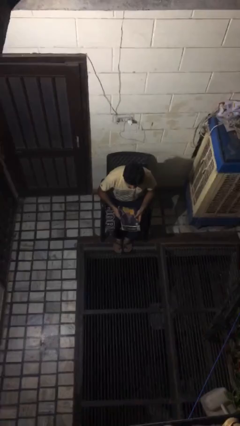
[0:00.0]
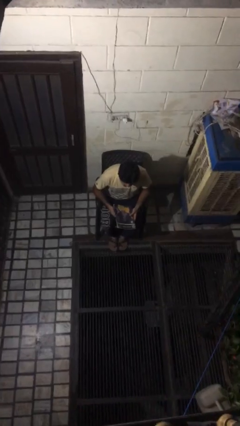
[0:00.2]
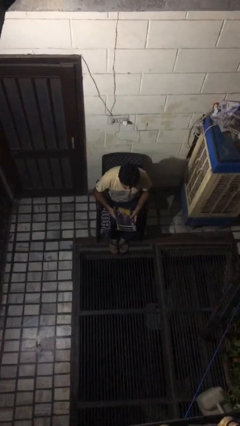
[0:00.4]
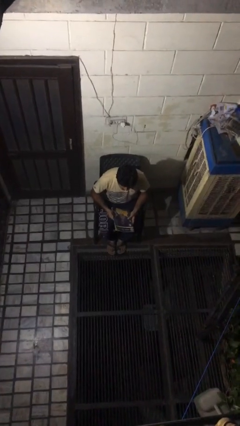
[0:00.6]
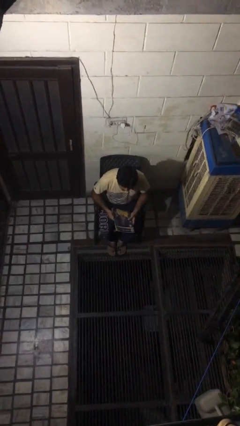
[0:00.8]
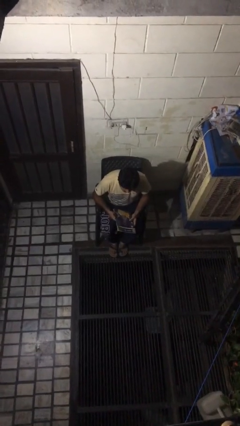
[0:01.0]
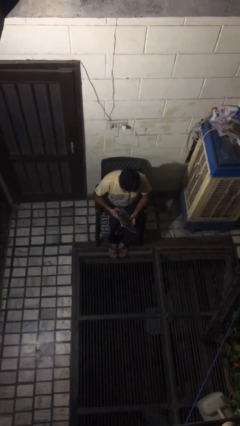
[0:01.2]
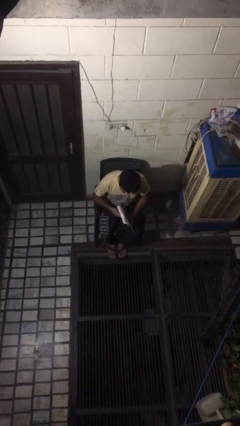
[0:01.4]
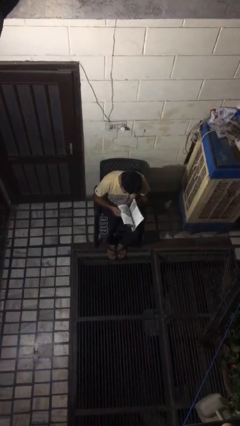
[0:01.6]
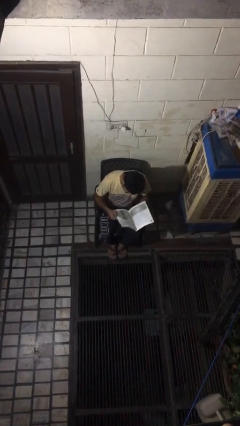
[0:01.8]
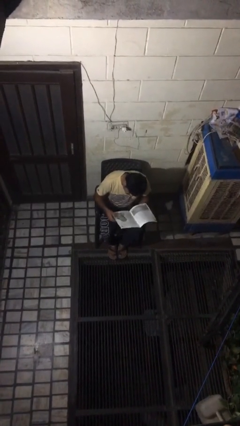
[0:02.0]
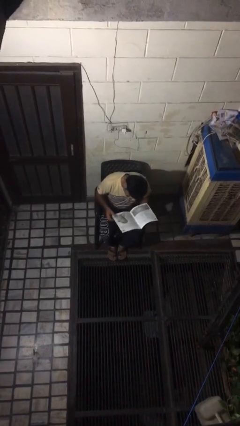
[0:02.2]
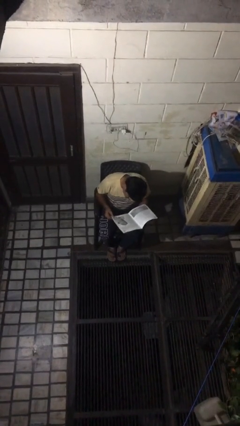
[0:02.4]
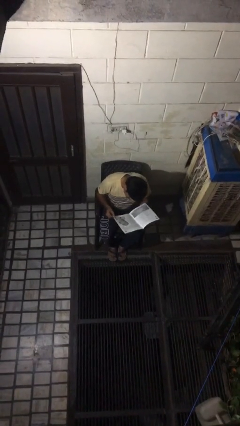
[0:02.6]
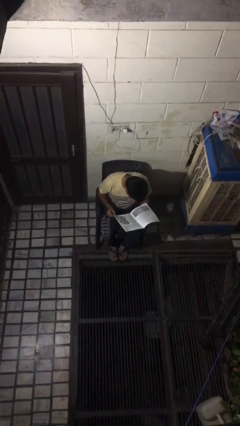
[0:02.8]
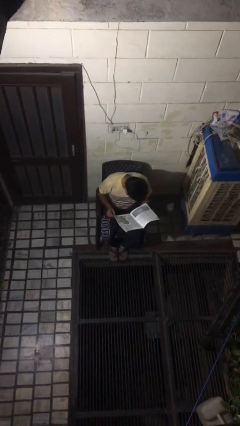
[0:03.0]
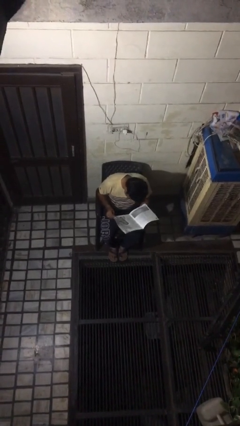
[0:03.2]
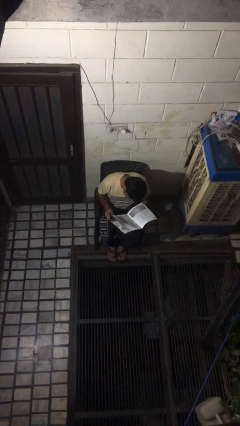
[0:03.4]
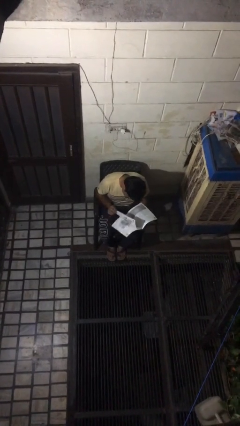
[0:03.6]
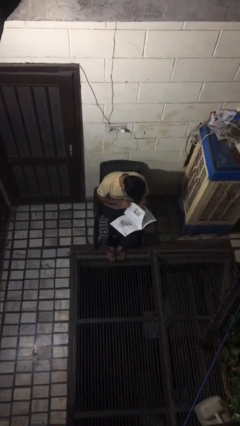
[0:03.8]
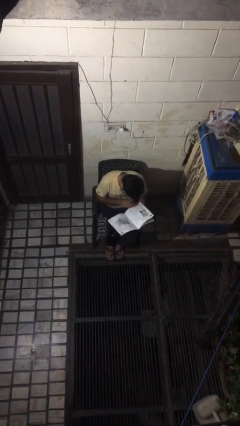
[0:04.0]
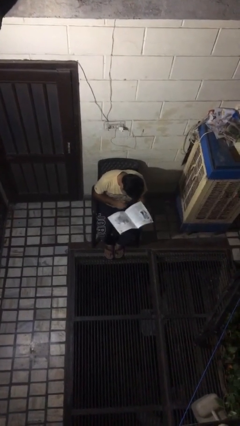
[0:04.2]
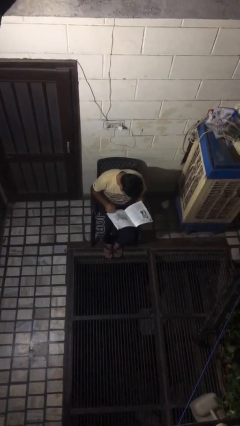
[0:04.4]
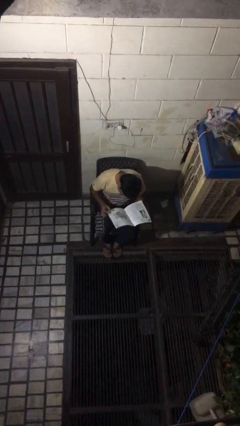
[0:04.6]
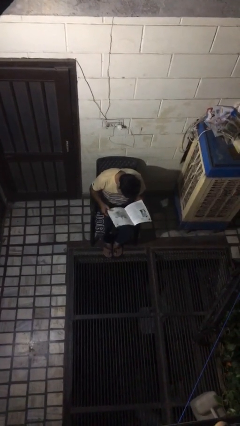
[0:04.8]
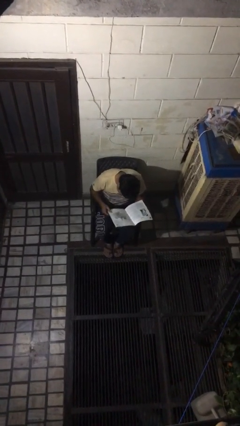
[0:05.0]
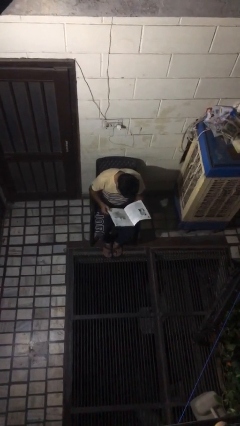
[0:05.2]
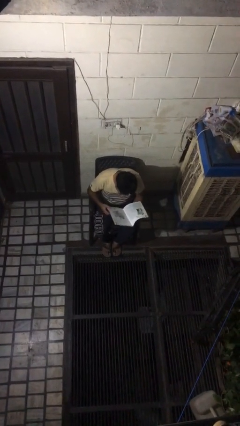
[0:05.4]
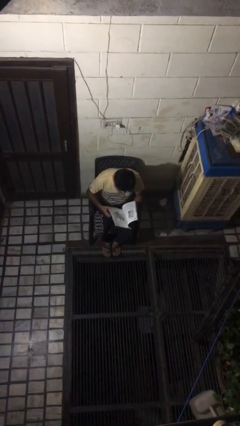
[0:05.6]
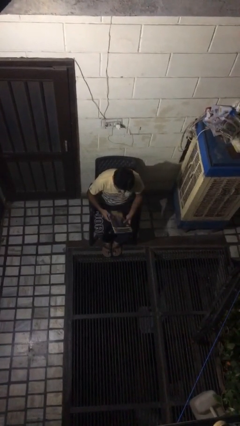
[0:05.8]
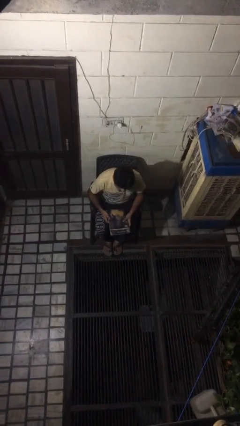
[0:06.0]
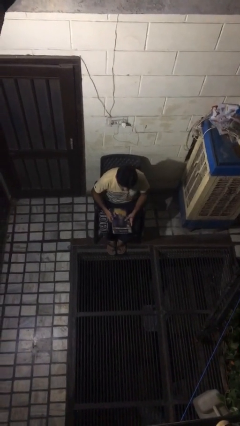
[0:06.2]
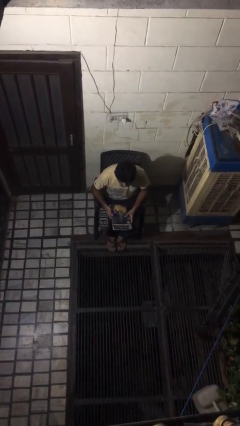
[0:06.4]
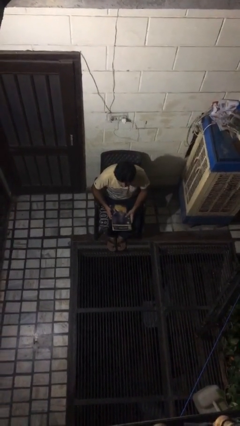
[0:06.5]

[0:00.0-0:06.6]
person reads magazine

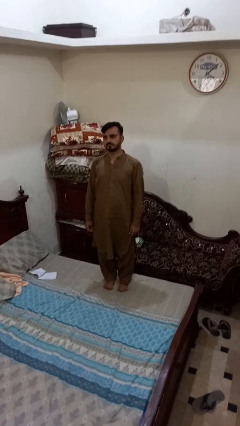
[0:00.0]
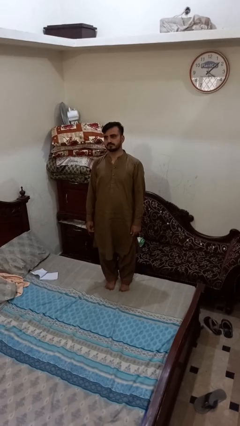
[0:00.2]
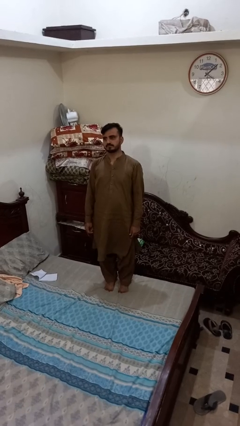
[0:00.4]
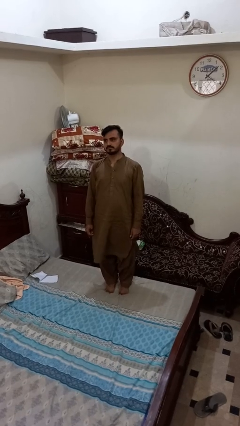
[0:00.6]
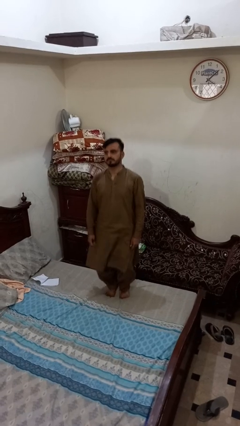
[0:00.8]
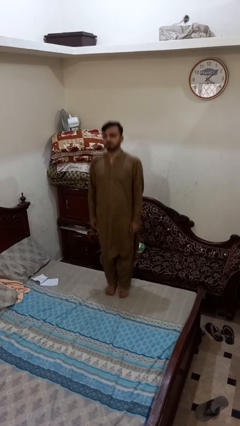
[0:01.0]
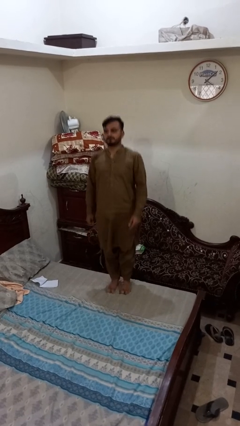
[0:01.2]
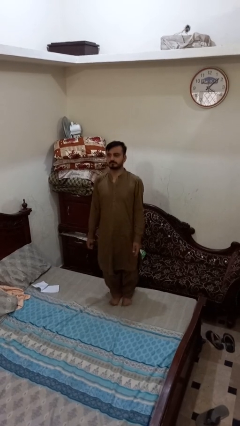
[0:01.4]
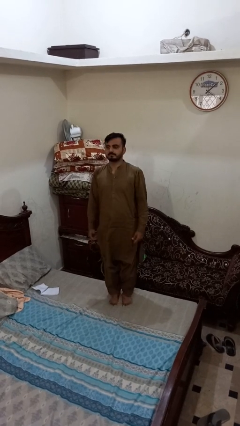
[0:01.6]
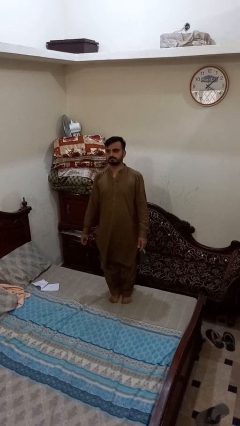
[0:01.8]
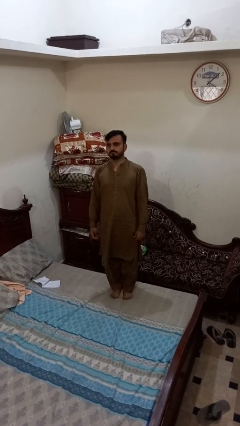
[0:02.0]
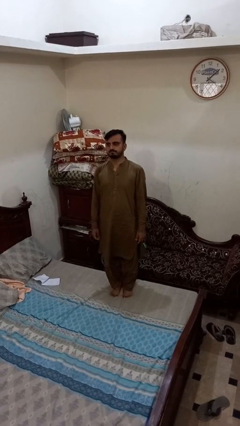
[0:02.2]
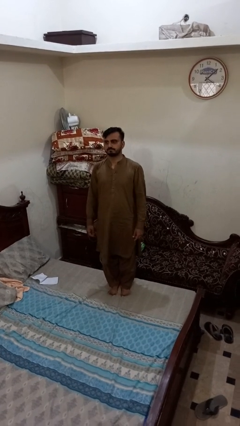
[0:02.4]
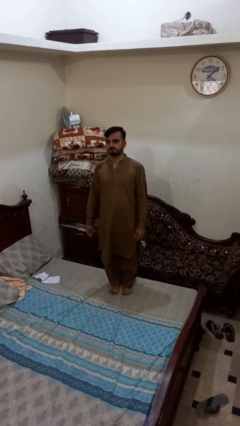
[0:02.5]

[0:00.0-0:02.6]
person jumps on bed

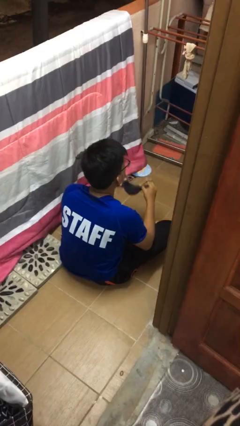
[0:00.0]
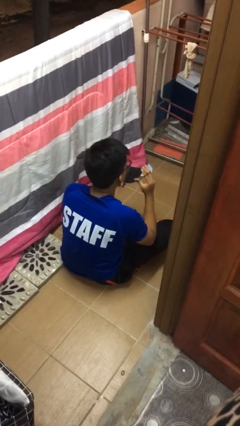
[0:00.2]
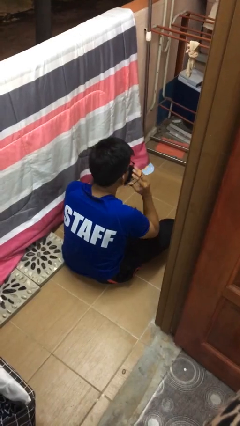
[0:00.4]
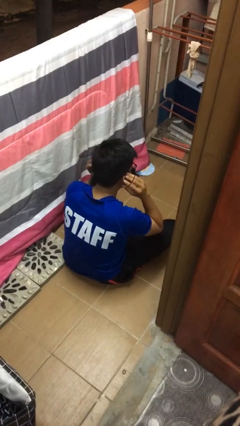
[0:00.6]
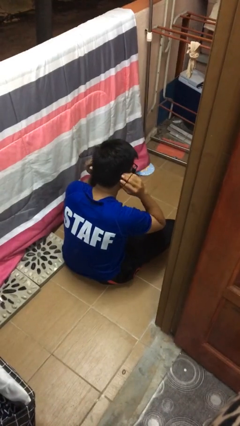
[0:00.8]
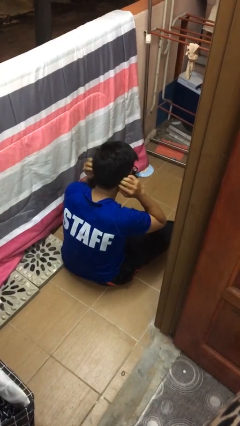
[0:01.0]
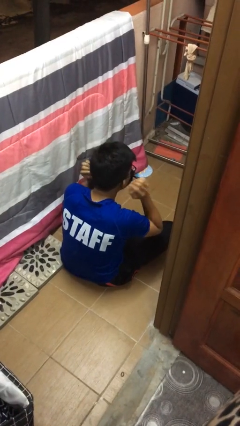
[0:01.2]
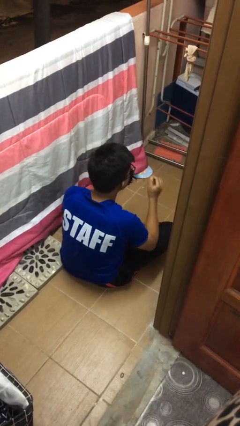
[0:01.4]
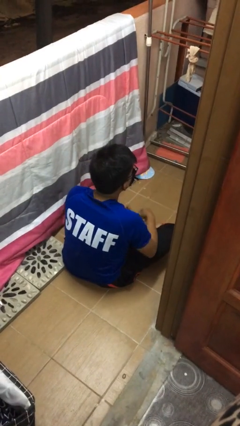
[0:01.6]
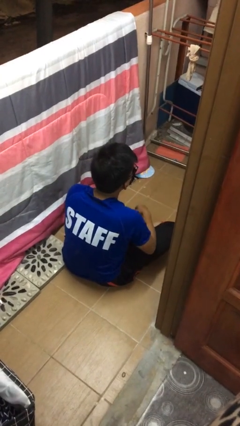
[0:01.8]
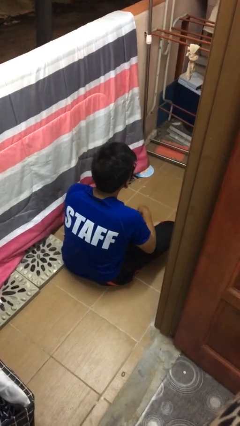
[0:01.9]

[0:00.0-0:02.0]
person puts on facemask

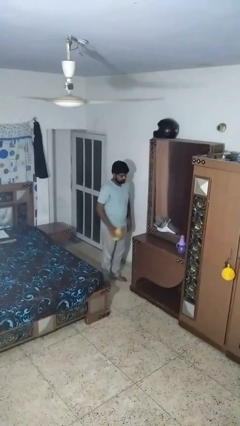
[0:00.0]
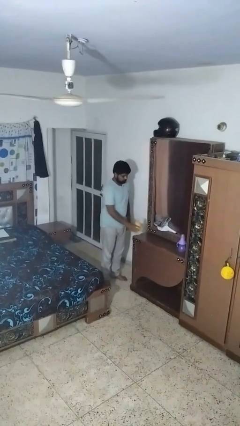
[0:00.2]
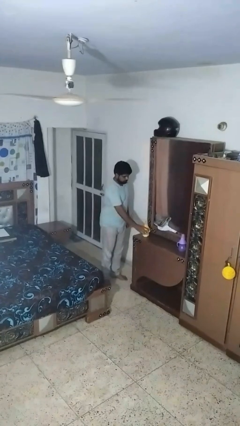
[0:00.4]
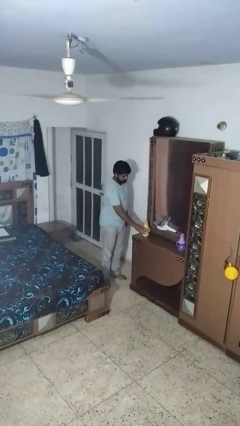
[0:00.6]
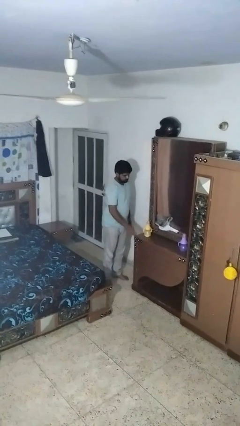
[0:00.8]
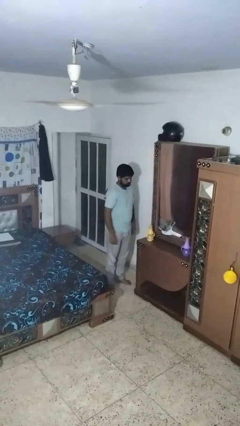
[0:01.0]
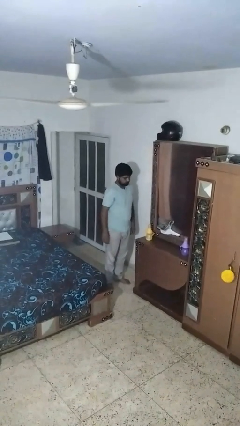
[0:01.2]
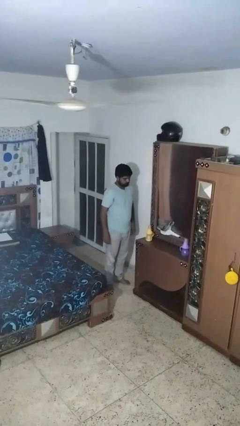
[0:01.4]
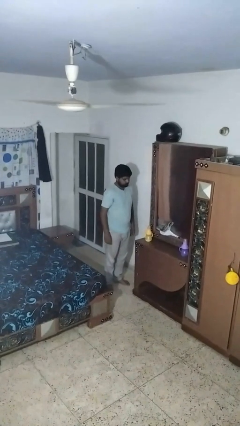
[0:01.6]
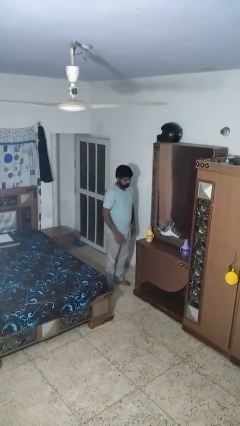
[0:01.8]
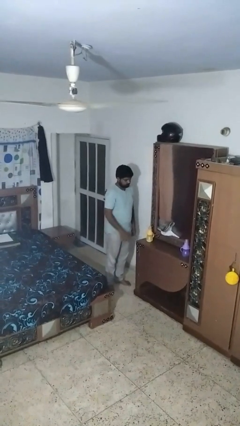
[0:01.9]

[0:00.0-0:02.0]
person puts down object on countertop

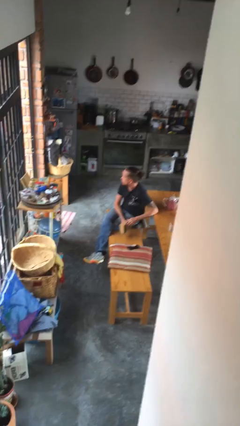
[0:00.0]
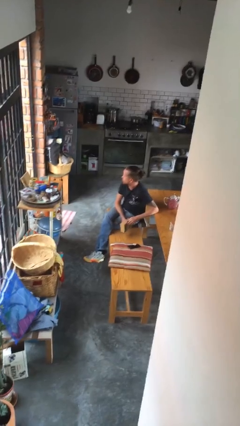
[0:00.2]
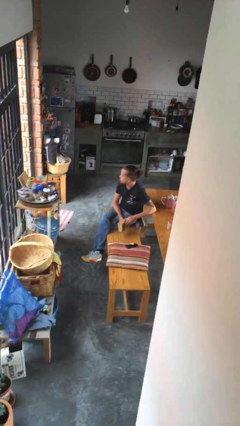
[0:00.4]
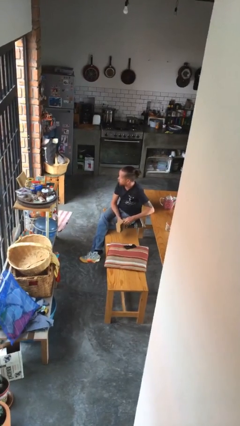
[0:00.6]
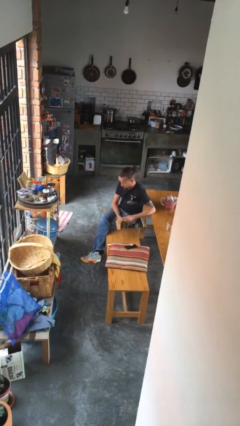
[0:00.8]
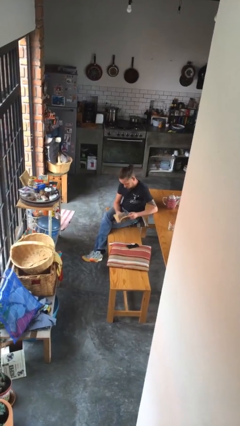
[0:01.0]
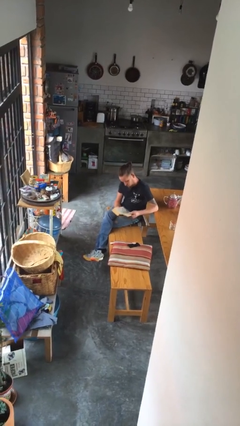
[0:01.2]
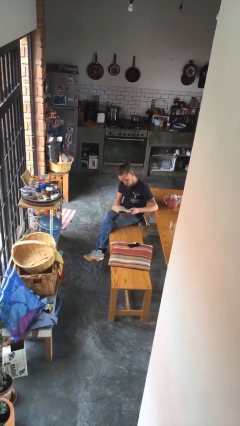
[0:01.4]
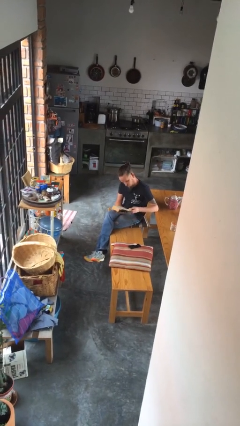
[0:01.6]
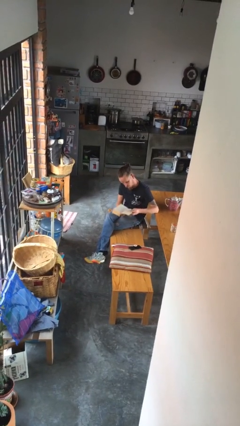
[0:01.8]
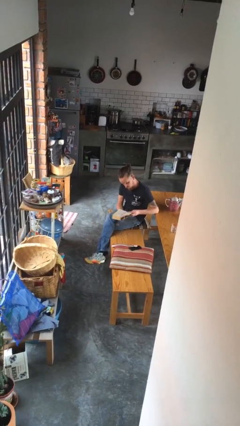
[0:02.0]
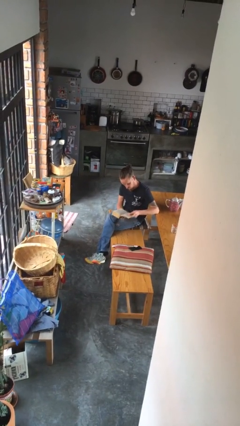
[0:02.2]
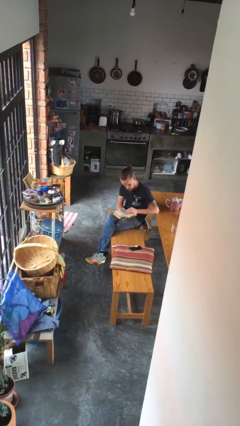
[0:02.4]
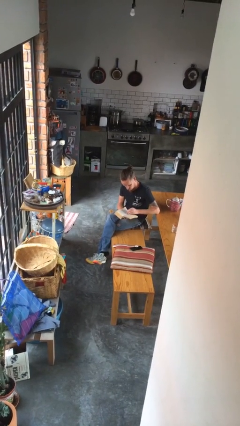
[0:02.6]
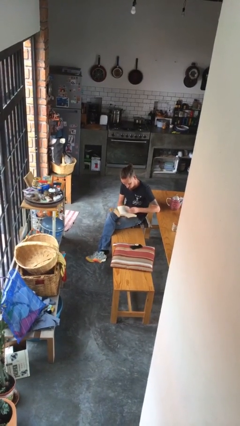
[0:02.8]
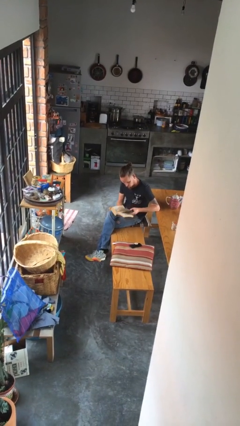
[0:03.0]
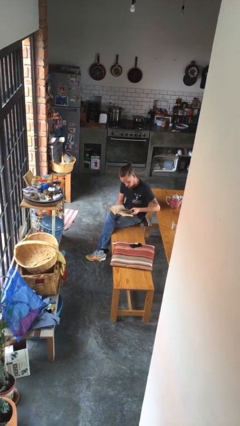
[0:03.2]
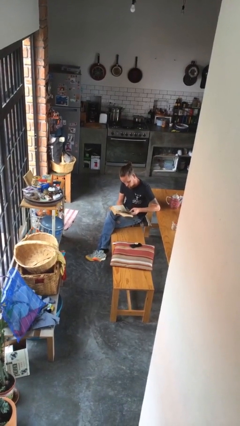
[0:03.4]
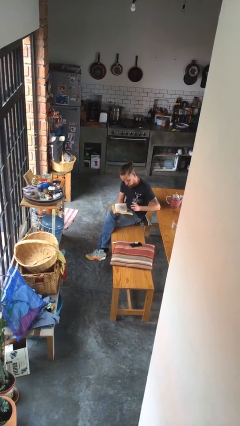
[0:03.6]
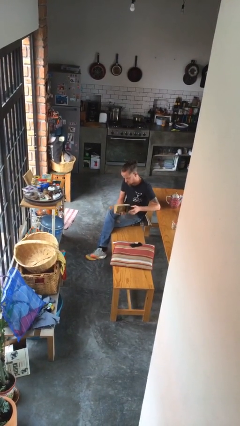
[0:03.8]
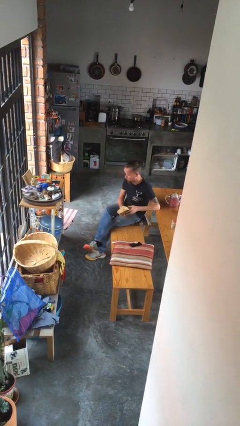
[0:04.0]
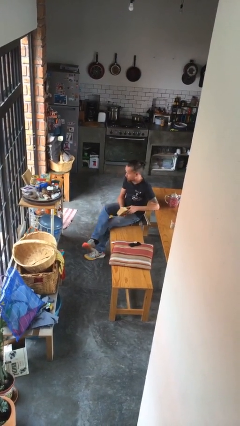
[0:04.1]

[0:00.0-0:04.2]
person reads book
